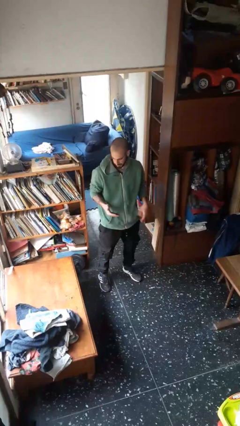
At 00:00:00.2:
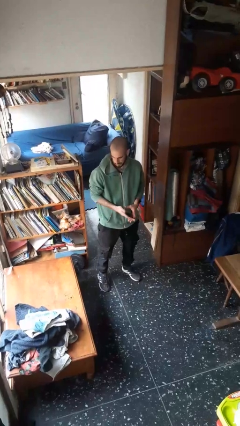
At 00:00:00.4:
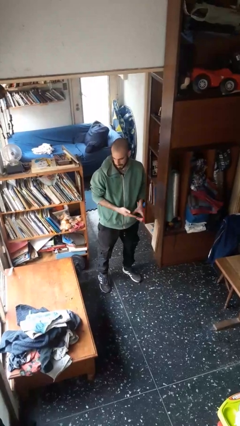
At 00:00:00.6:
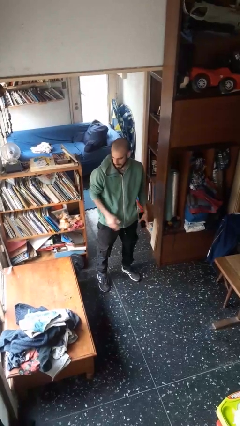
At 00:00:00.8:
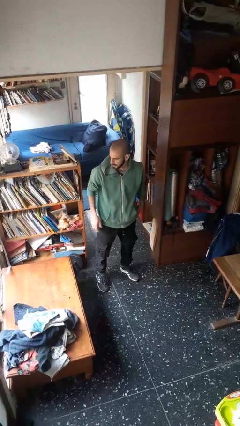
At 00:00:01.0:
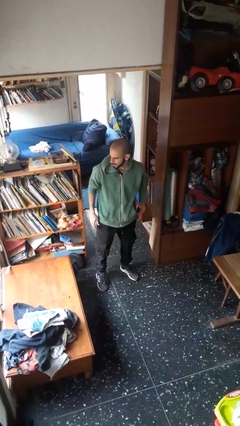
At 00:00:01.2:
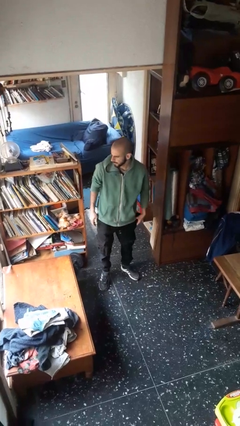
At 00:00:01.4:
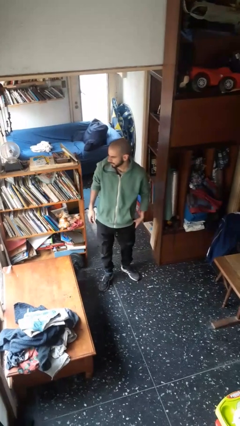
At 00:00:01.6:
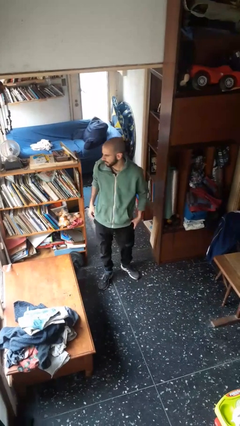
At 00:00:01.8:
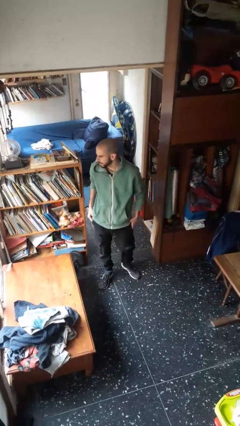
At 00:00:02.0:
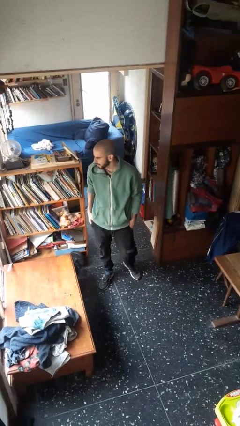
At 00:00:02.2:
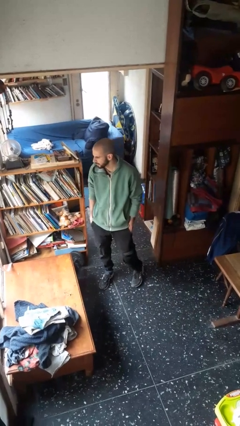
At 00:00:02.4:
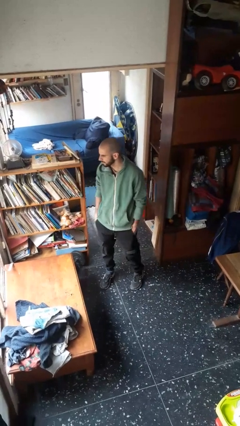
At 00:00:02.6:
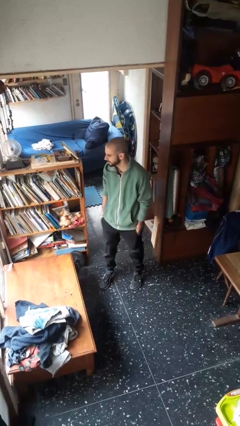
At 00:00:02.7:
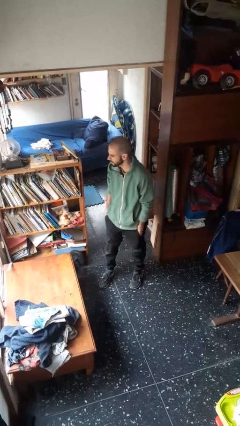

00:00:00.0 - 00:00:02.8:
person puts phone into pocket

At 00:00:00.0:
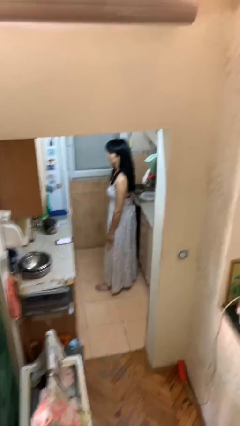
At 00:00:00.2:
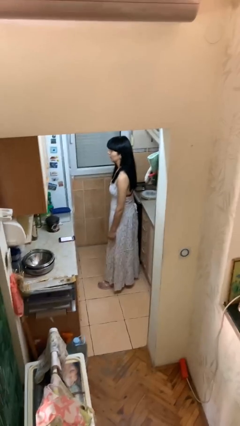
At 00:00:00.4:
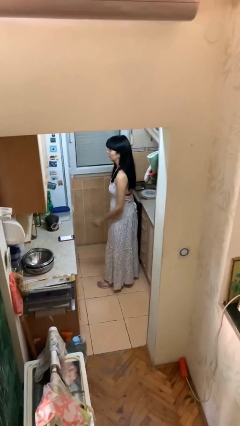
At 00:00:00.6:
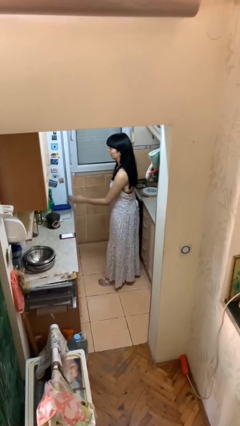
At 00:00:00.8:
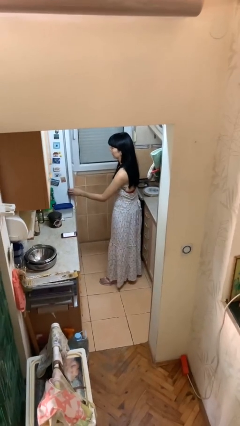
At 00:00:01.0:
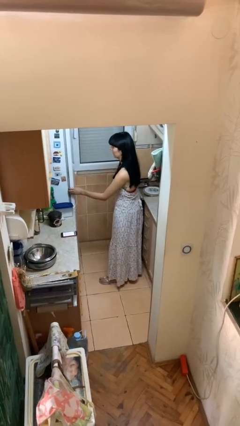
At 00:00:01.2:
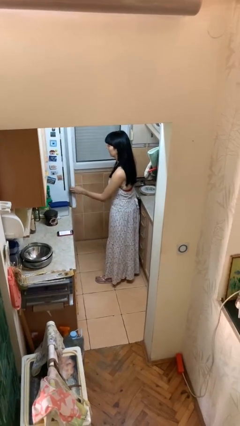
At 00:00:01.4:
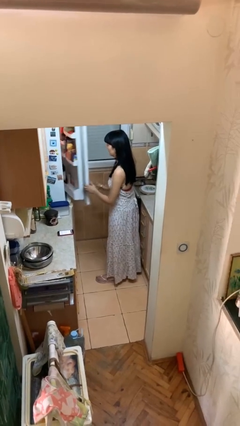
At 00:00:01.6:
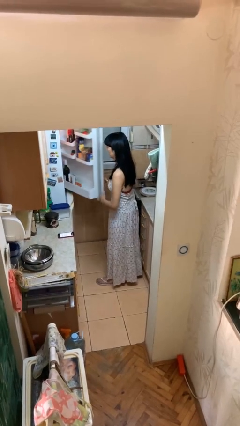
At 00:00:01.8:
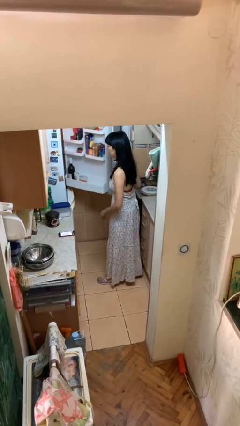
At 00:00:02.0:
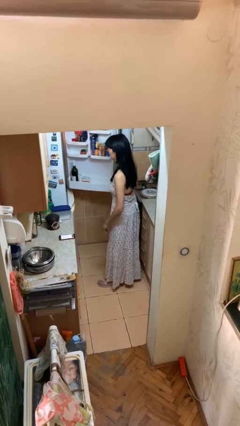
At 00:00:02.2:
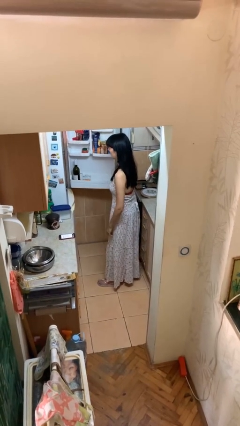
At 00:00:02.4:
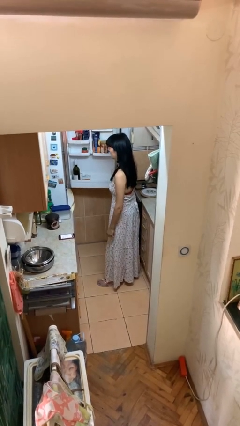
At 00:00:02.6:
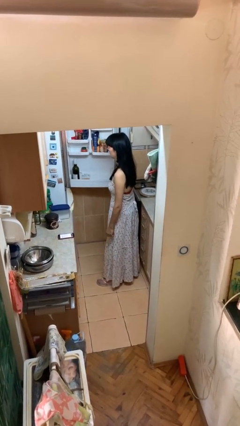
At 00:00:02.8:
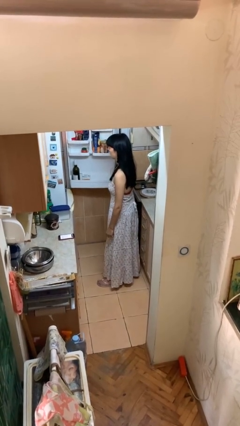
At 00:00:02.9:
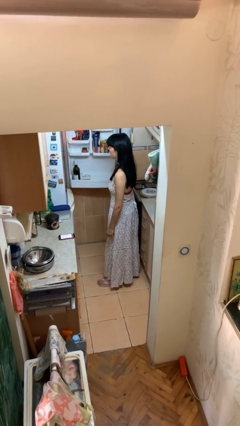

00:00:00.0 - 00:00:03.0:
person opens refrigerator

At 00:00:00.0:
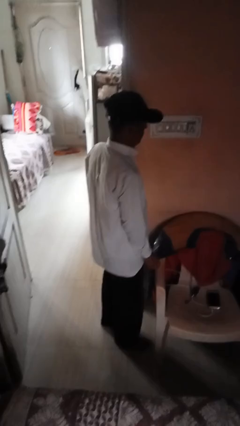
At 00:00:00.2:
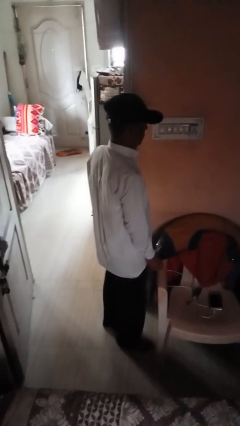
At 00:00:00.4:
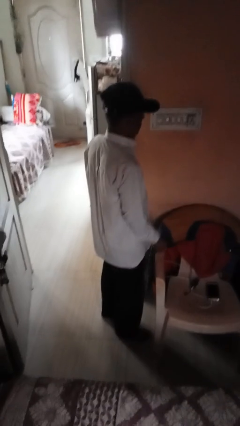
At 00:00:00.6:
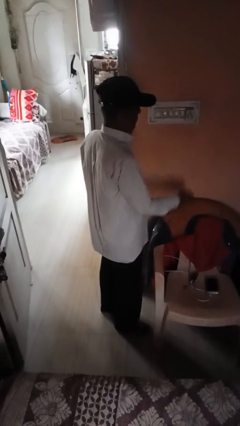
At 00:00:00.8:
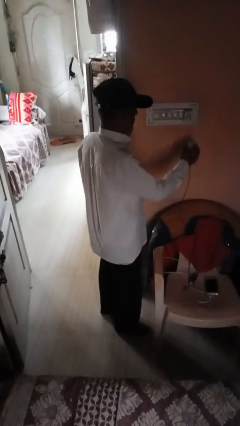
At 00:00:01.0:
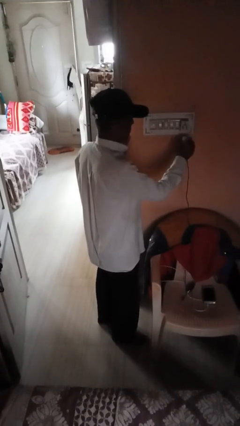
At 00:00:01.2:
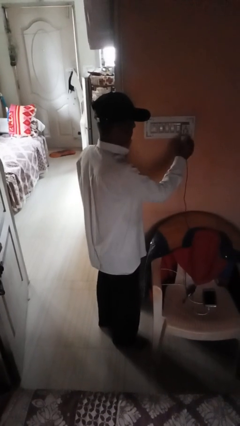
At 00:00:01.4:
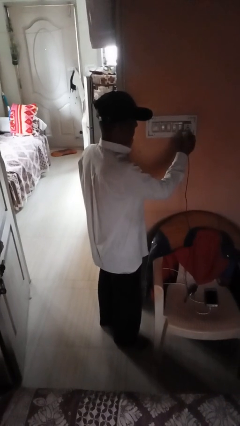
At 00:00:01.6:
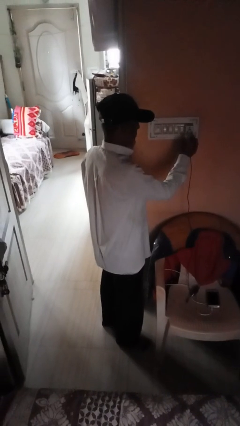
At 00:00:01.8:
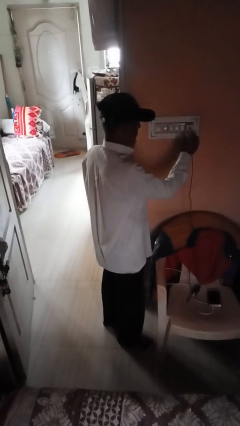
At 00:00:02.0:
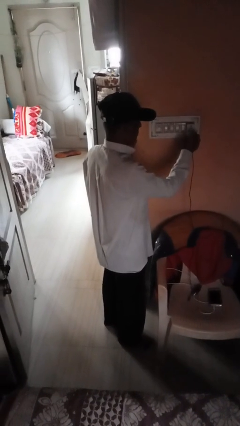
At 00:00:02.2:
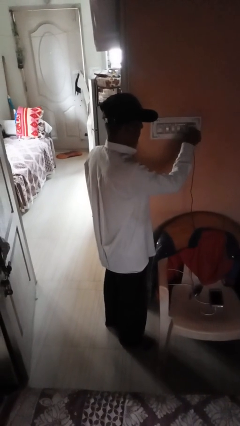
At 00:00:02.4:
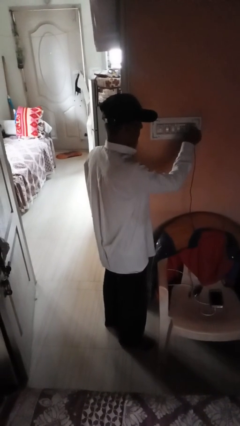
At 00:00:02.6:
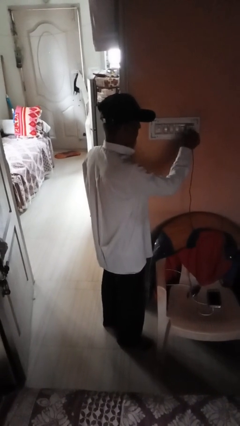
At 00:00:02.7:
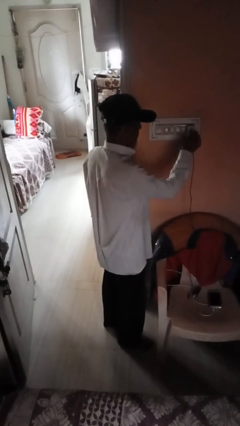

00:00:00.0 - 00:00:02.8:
person plugs into electrical socket

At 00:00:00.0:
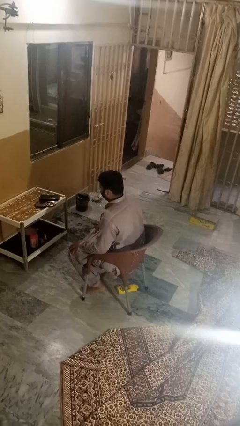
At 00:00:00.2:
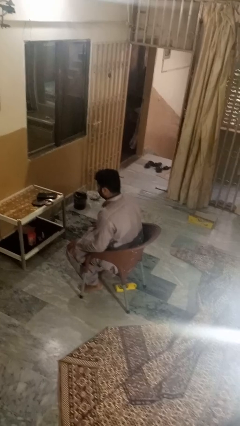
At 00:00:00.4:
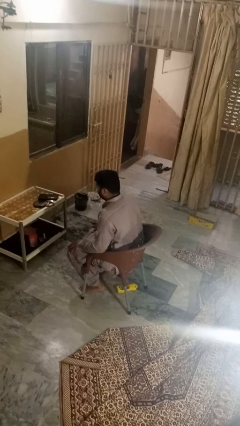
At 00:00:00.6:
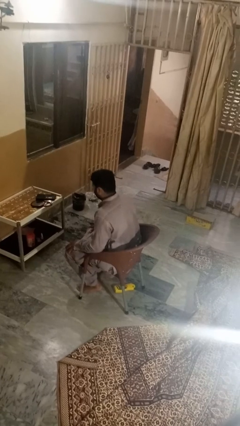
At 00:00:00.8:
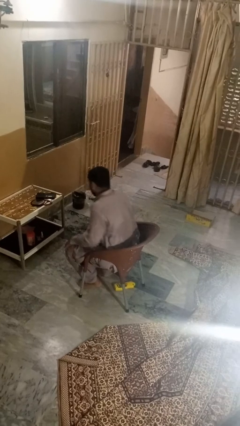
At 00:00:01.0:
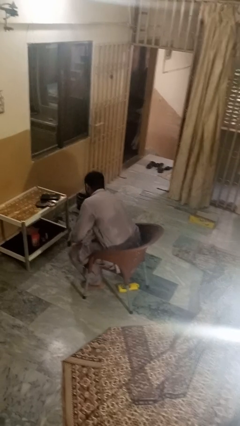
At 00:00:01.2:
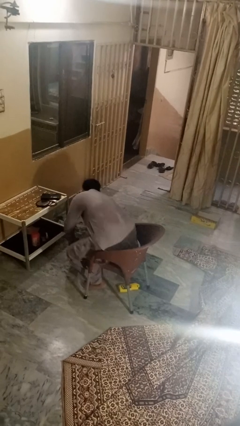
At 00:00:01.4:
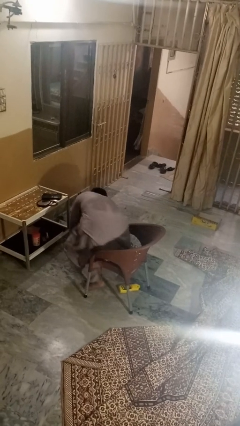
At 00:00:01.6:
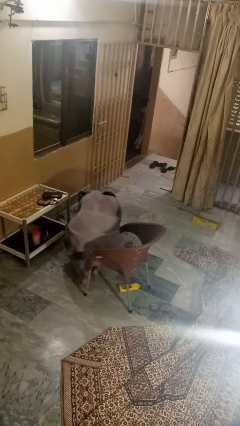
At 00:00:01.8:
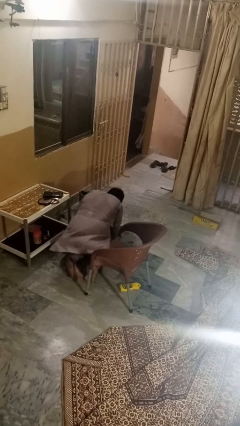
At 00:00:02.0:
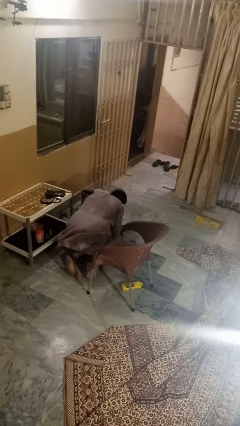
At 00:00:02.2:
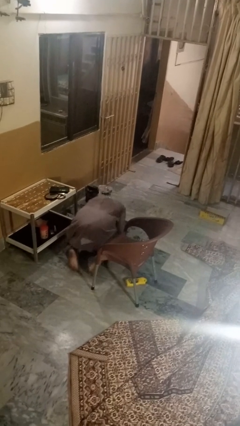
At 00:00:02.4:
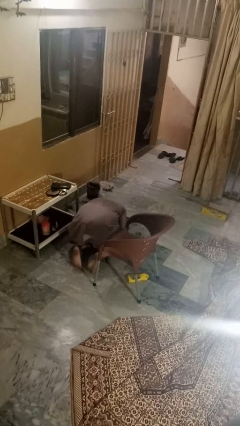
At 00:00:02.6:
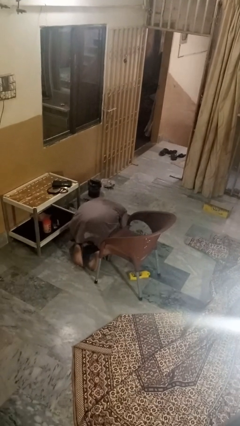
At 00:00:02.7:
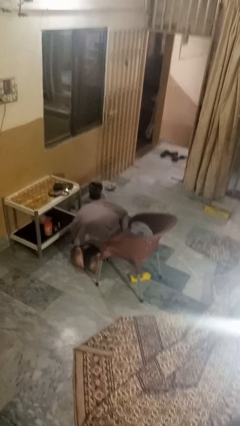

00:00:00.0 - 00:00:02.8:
person falls from chair

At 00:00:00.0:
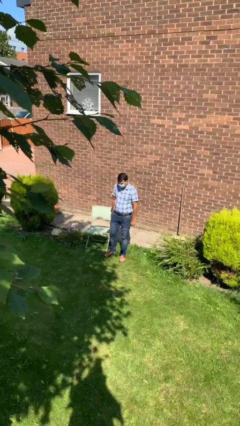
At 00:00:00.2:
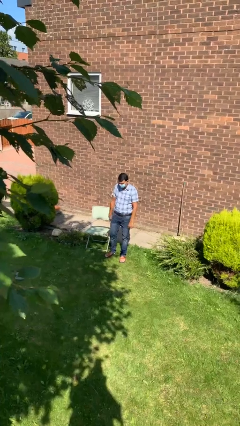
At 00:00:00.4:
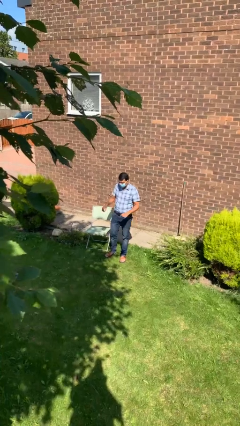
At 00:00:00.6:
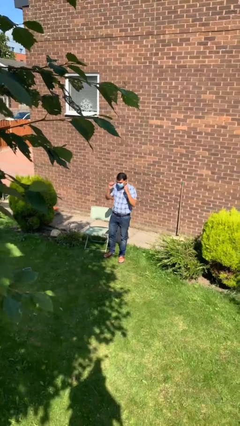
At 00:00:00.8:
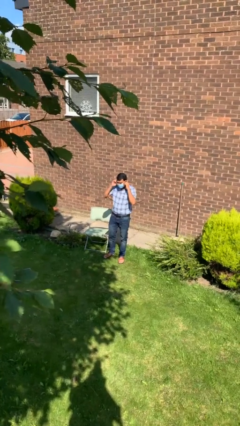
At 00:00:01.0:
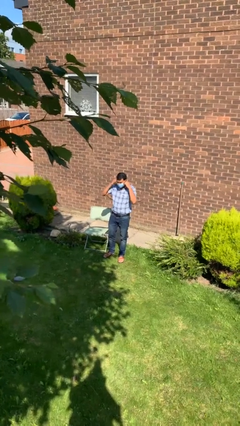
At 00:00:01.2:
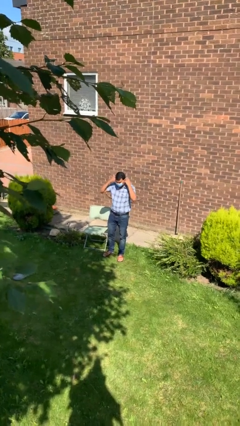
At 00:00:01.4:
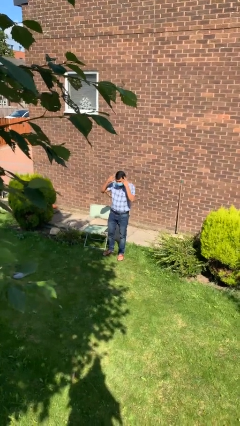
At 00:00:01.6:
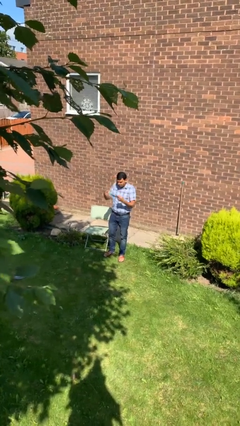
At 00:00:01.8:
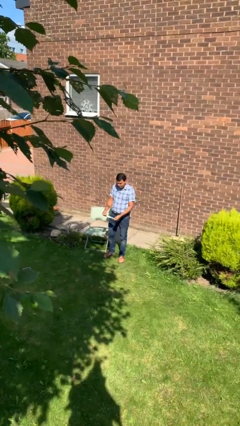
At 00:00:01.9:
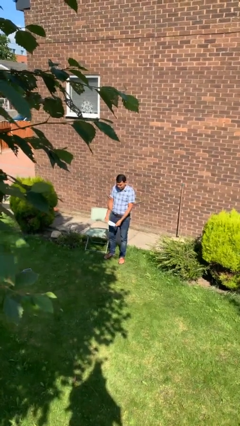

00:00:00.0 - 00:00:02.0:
person takes off facemask

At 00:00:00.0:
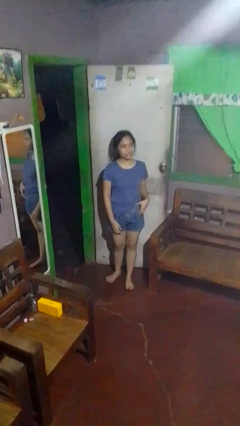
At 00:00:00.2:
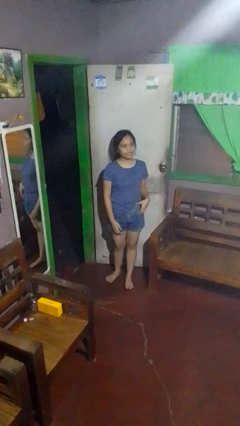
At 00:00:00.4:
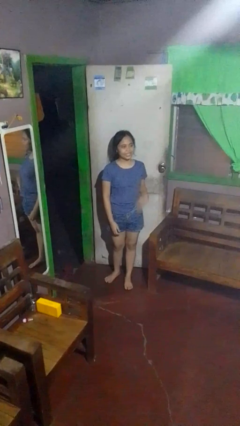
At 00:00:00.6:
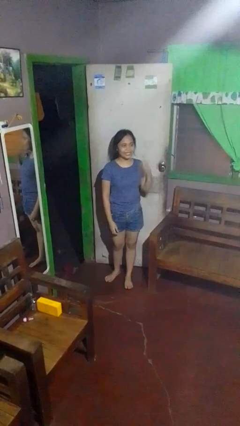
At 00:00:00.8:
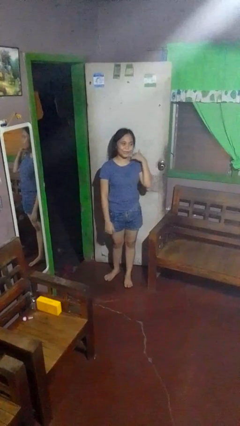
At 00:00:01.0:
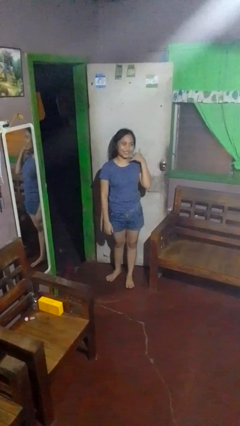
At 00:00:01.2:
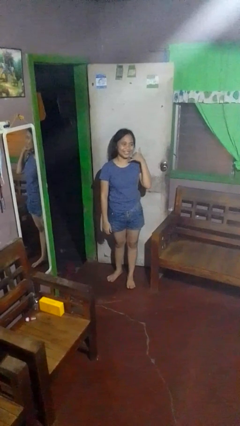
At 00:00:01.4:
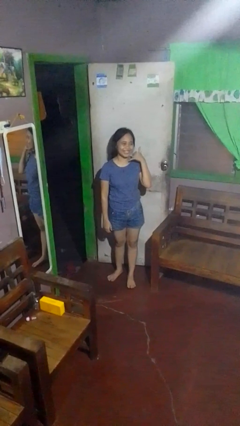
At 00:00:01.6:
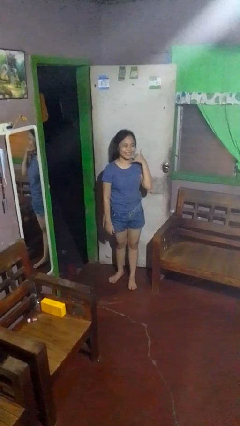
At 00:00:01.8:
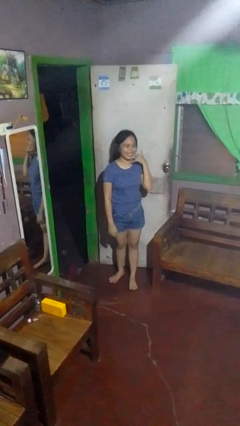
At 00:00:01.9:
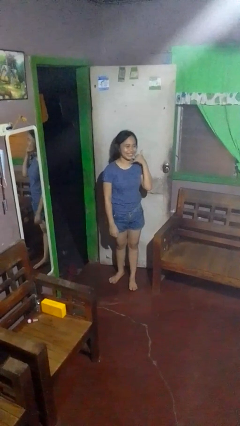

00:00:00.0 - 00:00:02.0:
person gestures call me

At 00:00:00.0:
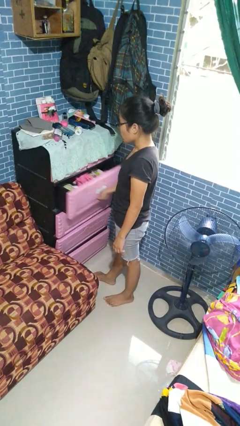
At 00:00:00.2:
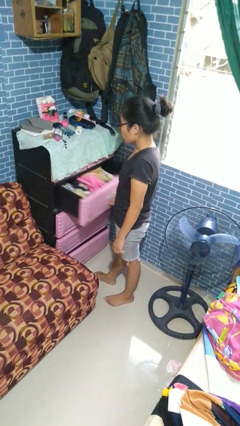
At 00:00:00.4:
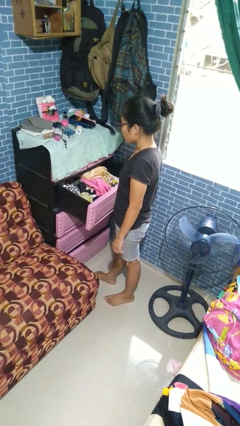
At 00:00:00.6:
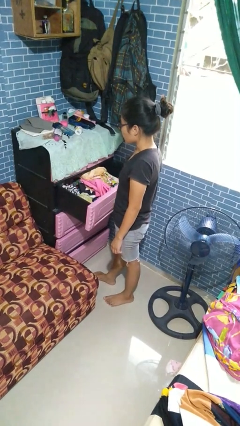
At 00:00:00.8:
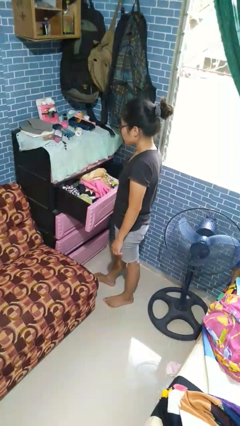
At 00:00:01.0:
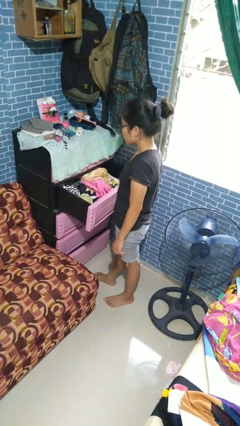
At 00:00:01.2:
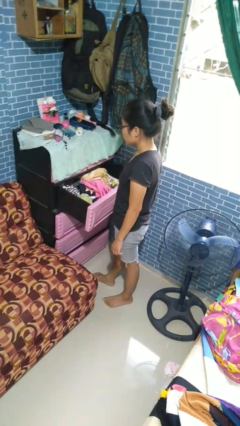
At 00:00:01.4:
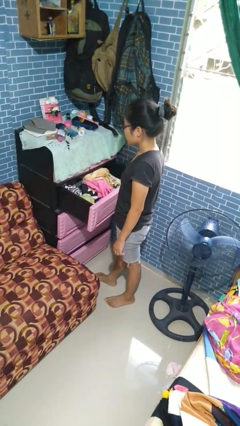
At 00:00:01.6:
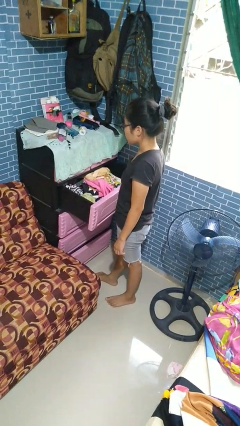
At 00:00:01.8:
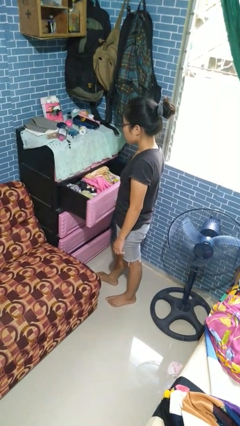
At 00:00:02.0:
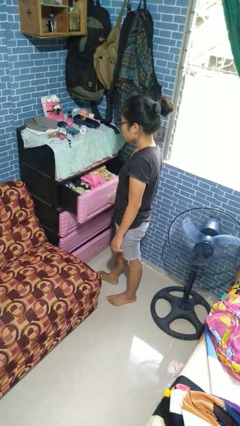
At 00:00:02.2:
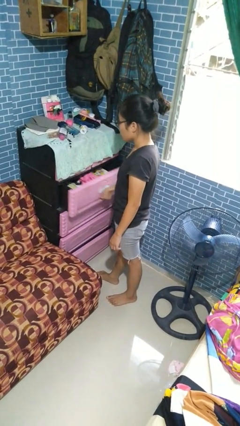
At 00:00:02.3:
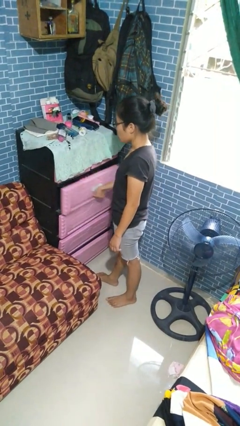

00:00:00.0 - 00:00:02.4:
person opens dresser drawer
